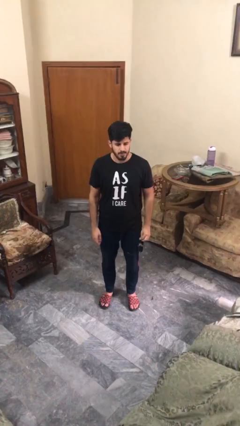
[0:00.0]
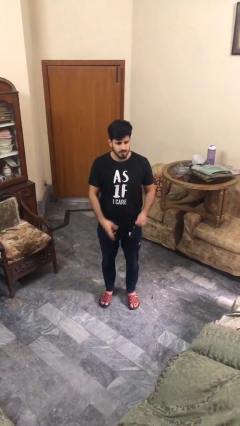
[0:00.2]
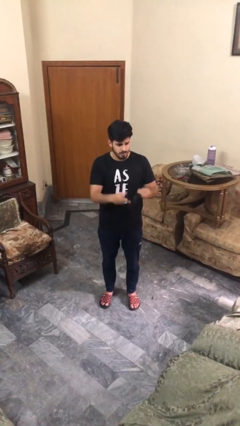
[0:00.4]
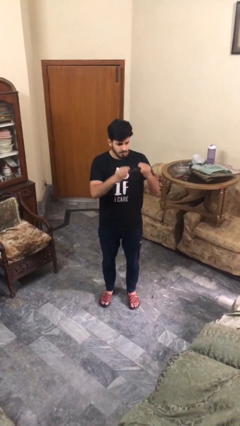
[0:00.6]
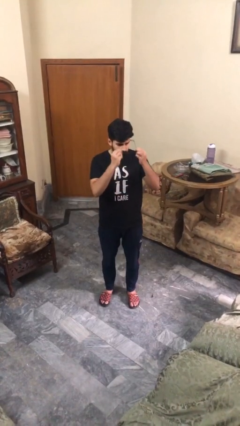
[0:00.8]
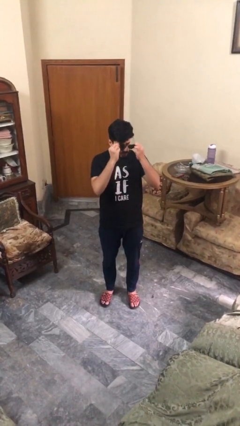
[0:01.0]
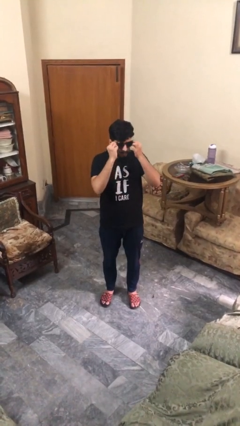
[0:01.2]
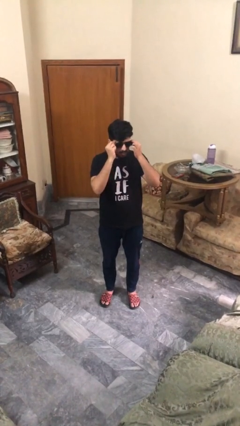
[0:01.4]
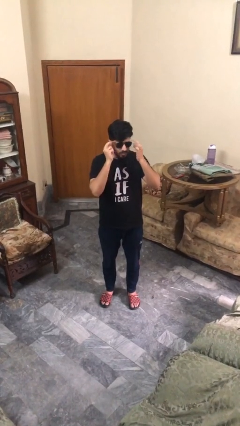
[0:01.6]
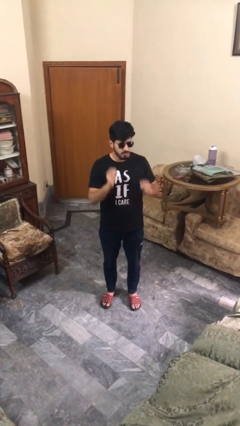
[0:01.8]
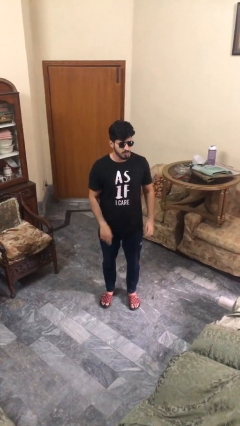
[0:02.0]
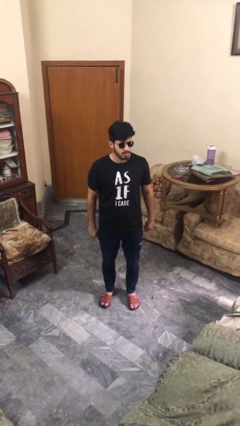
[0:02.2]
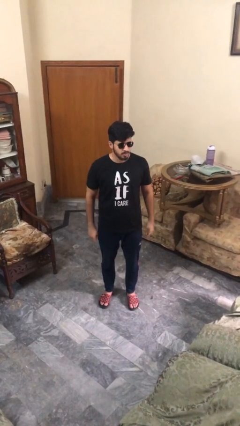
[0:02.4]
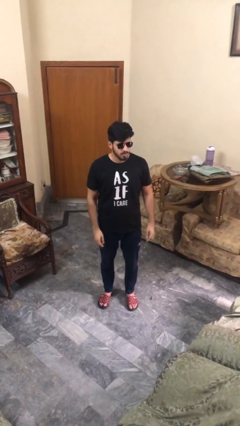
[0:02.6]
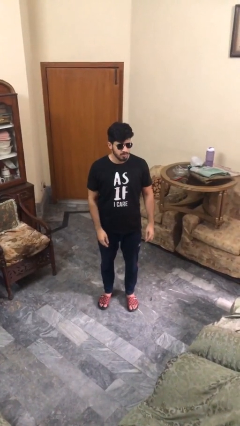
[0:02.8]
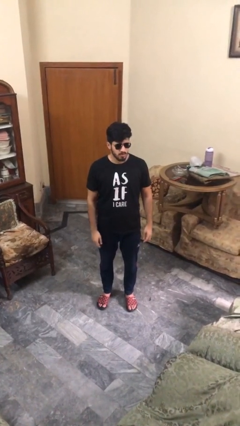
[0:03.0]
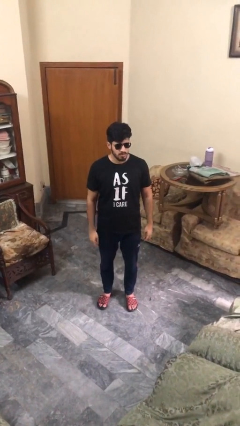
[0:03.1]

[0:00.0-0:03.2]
person puts on sunglasses

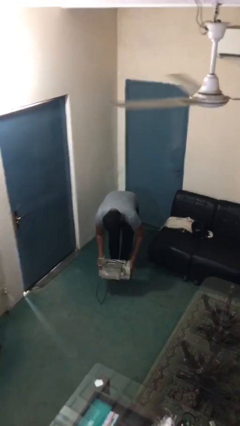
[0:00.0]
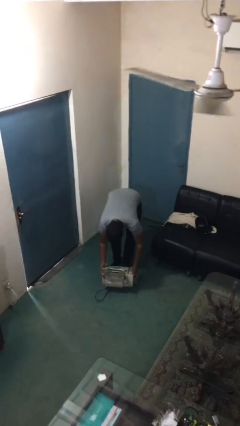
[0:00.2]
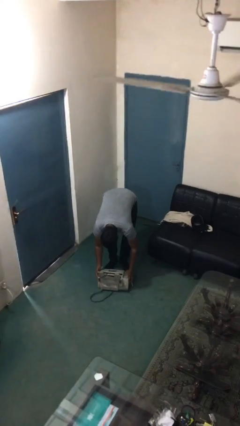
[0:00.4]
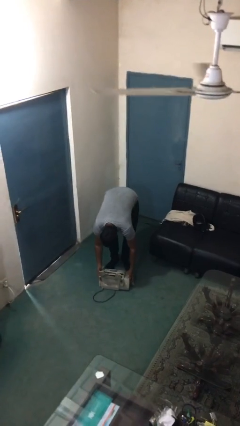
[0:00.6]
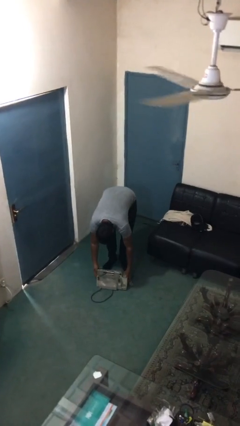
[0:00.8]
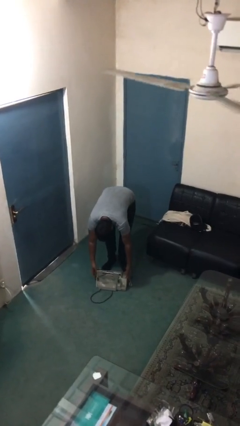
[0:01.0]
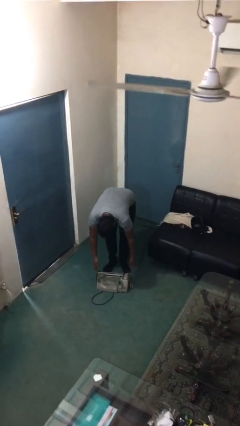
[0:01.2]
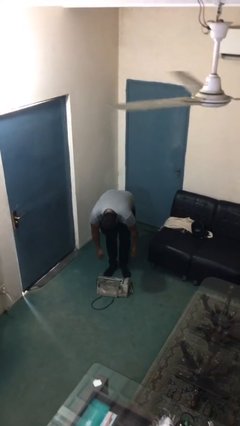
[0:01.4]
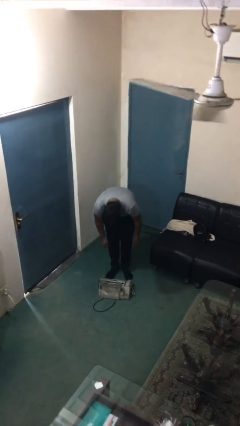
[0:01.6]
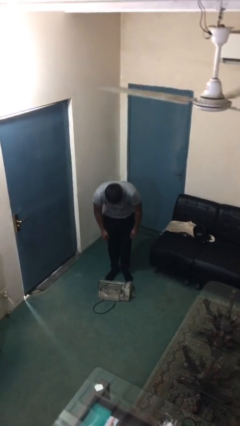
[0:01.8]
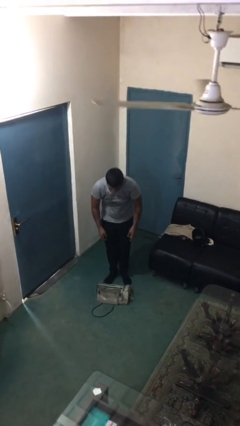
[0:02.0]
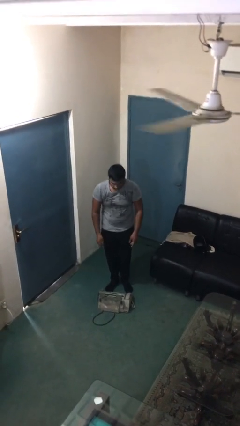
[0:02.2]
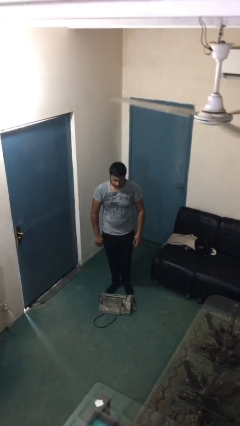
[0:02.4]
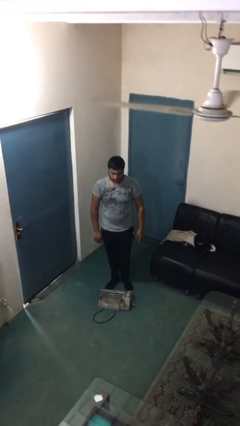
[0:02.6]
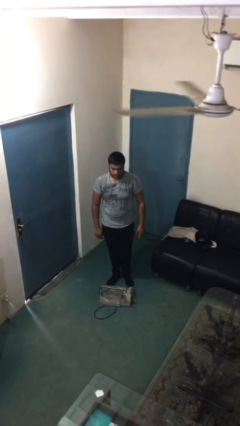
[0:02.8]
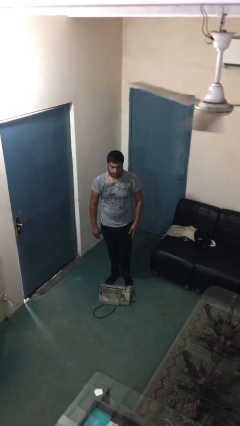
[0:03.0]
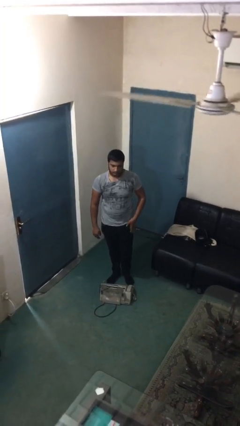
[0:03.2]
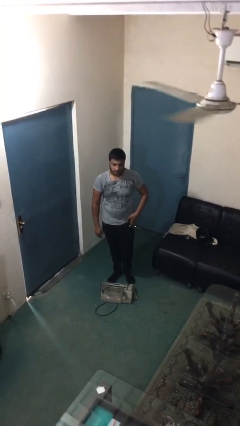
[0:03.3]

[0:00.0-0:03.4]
person puts down object on floor

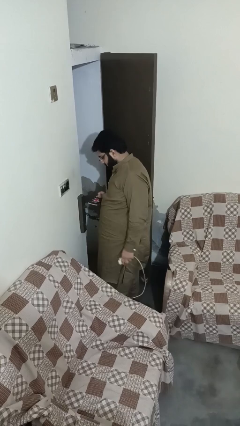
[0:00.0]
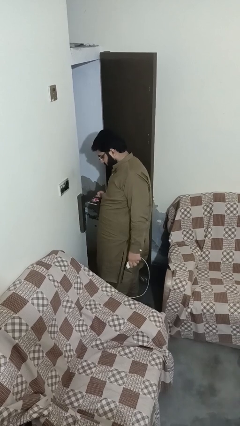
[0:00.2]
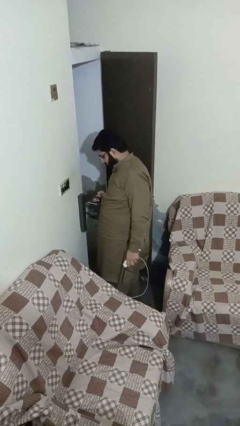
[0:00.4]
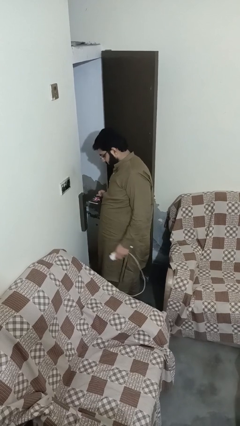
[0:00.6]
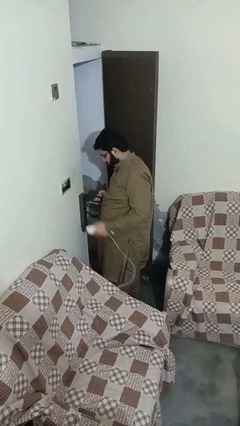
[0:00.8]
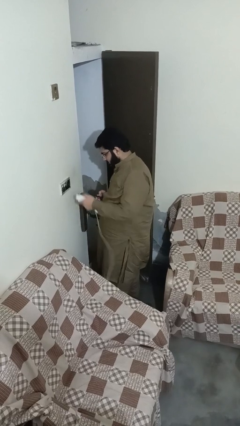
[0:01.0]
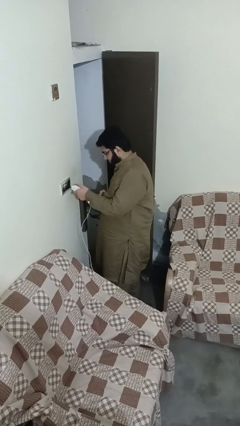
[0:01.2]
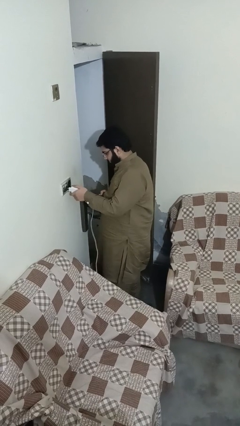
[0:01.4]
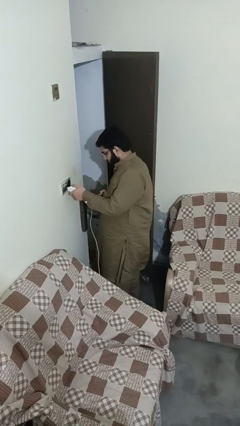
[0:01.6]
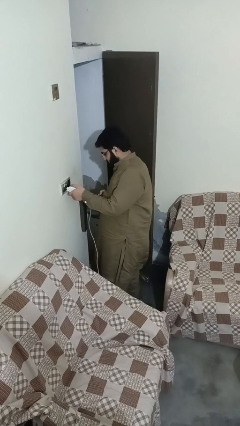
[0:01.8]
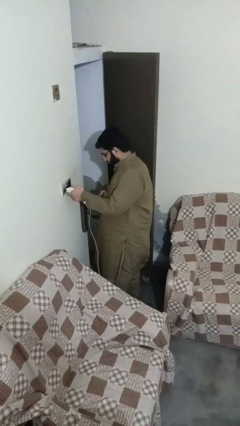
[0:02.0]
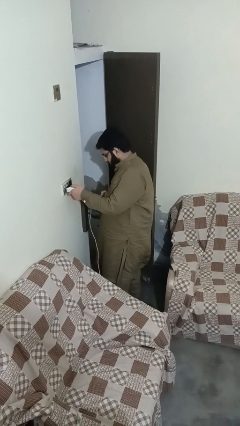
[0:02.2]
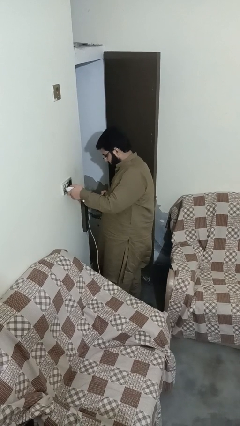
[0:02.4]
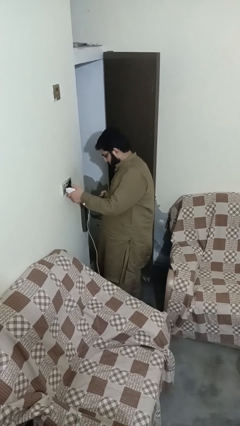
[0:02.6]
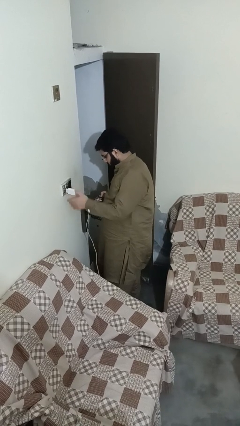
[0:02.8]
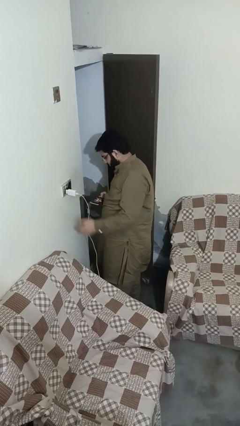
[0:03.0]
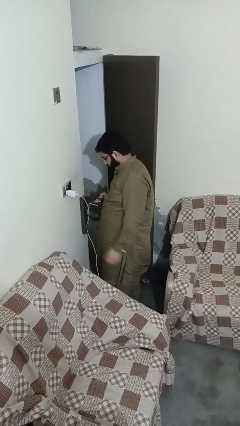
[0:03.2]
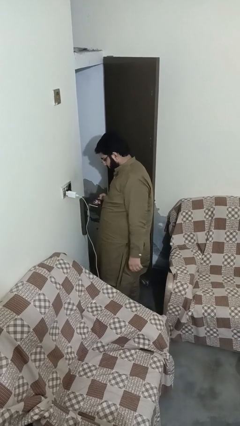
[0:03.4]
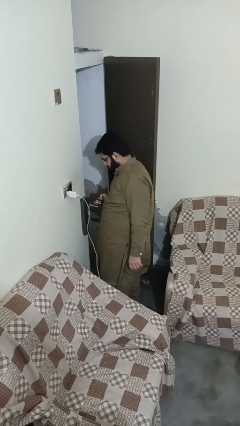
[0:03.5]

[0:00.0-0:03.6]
person plugs into electrical socket

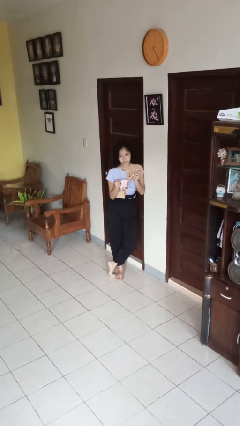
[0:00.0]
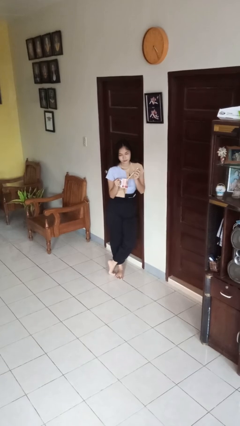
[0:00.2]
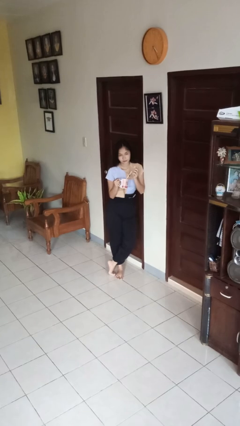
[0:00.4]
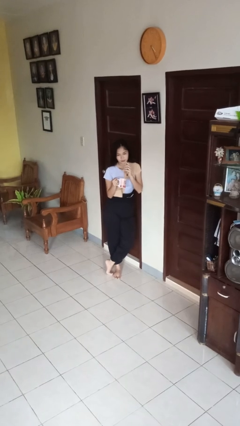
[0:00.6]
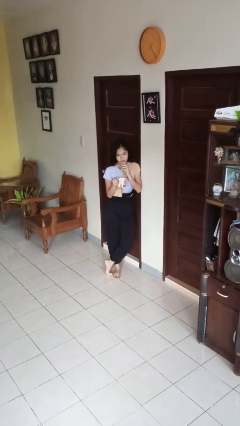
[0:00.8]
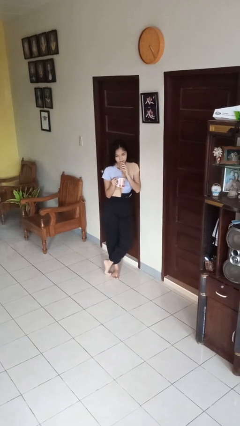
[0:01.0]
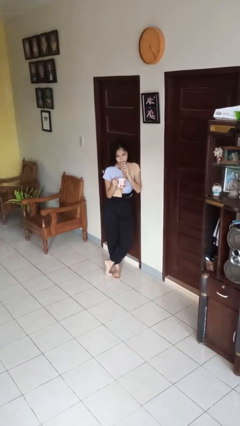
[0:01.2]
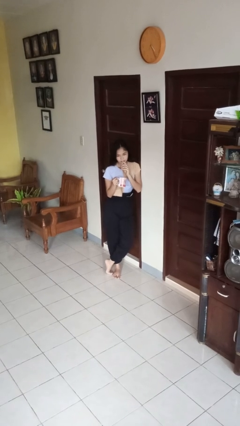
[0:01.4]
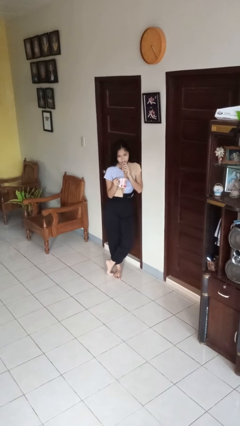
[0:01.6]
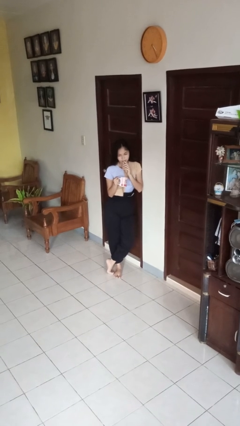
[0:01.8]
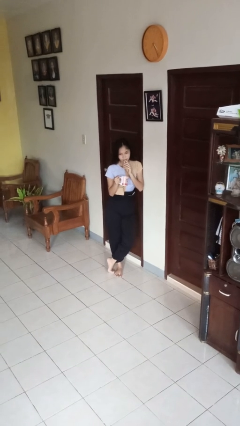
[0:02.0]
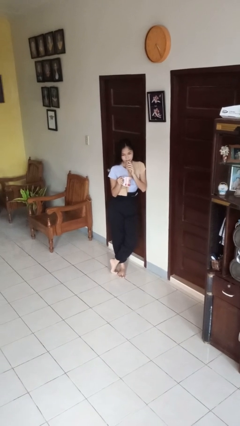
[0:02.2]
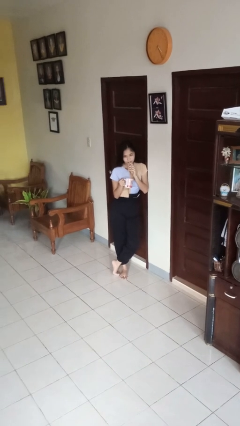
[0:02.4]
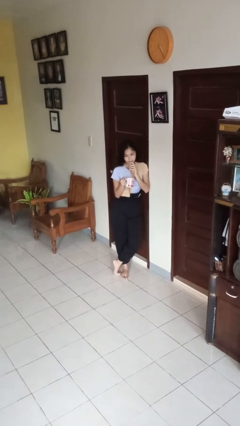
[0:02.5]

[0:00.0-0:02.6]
person drinks from straw

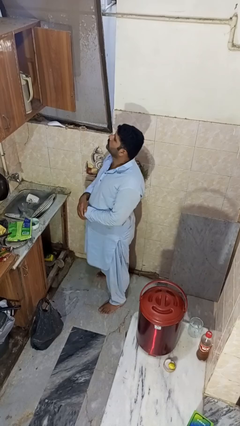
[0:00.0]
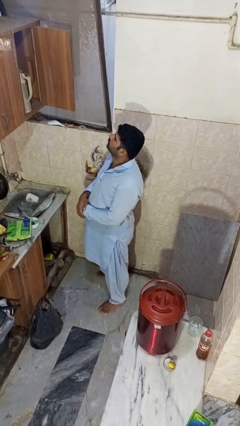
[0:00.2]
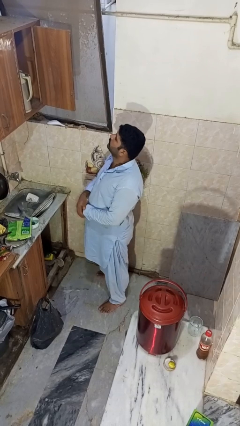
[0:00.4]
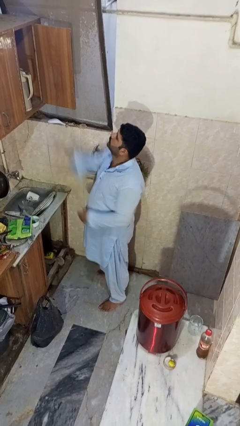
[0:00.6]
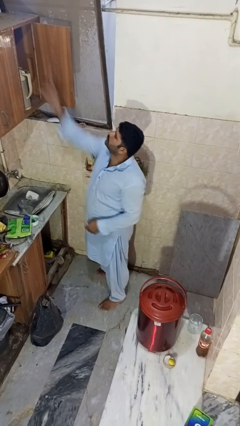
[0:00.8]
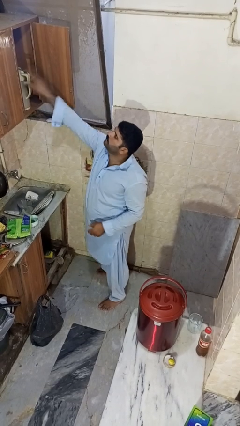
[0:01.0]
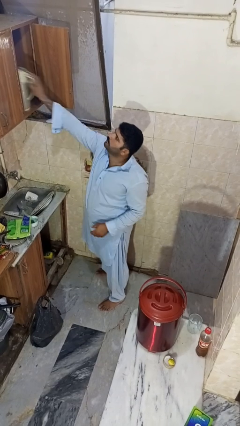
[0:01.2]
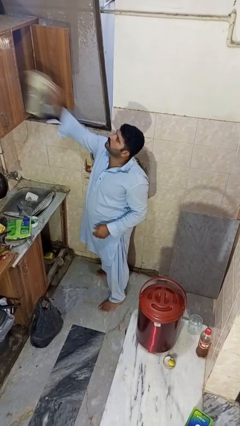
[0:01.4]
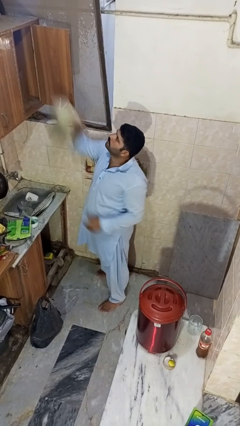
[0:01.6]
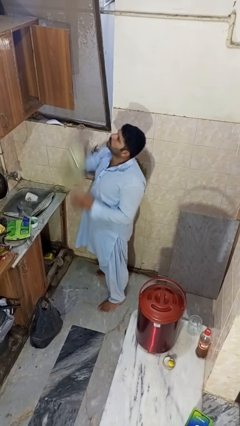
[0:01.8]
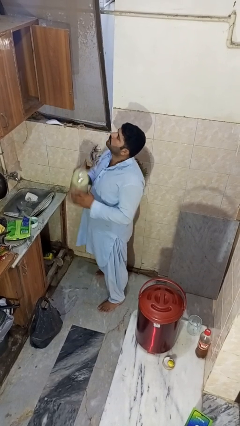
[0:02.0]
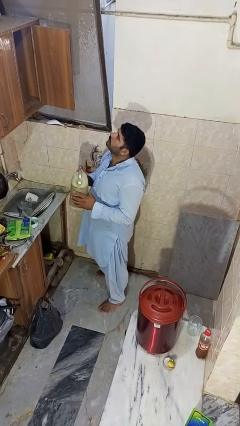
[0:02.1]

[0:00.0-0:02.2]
person takes object from cabinet

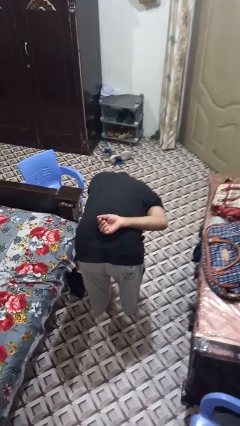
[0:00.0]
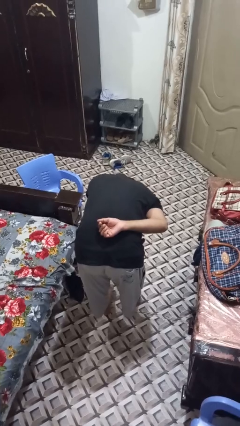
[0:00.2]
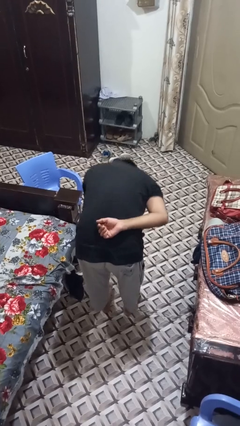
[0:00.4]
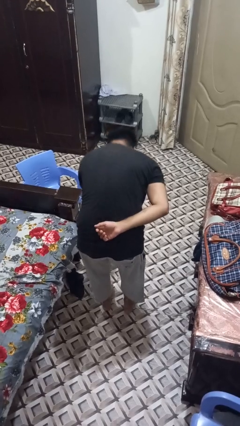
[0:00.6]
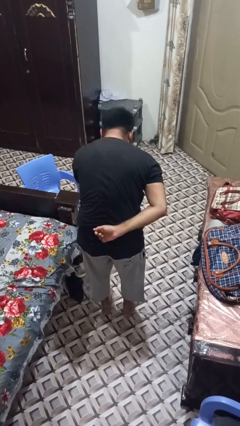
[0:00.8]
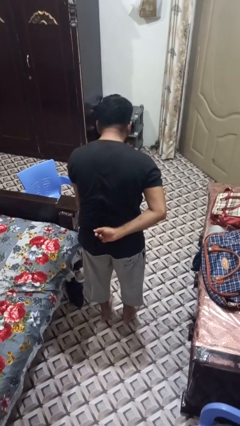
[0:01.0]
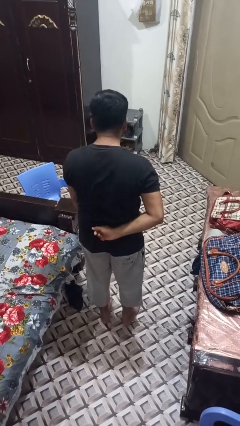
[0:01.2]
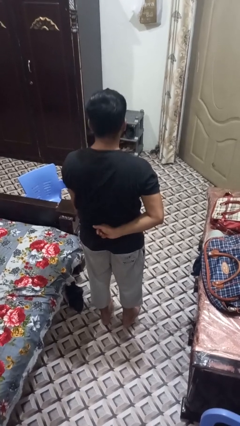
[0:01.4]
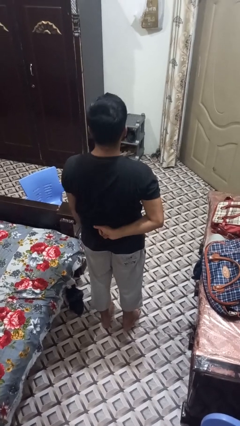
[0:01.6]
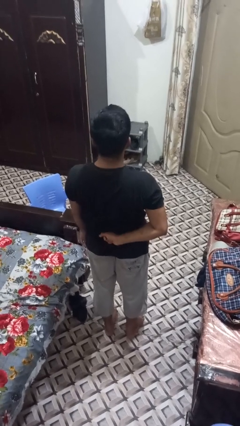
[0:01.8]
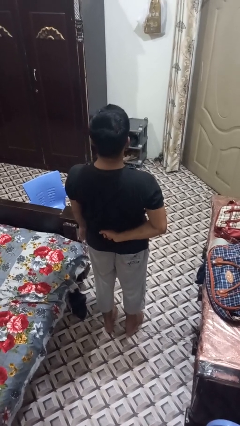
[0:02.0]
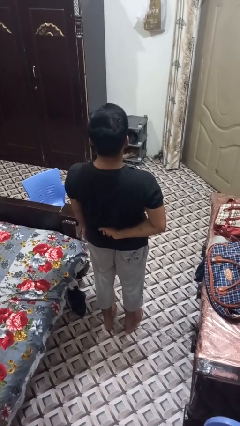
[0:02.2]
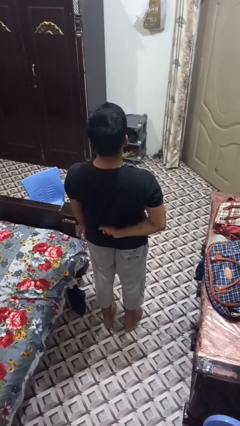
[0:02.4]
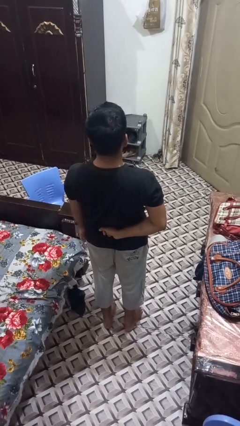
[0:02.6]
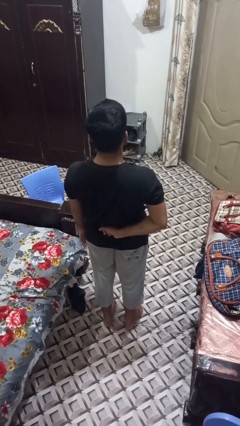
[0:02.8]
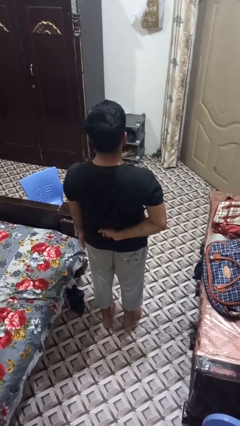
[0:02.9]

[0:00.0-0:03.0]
person stands up from floor
